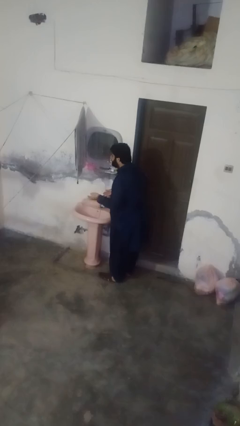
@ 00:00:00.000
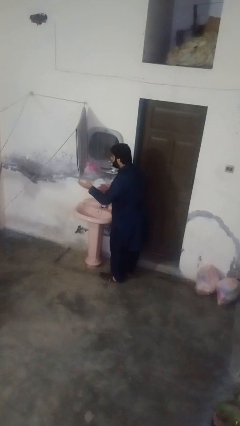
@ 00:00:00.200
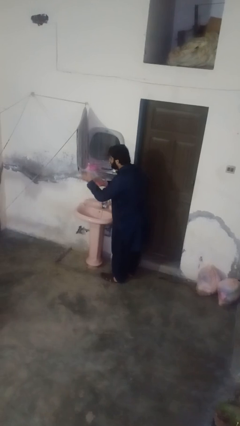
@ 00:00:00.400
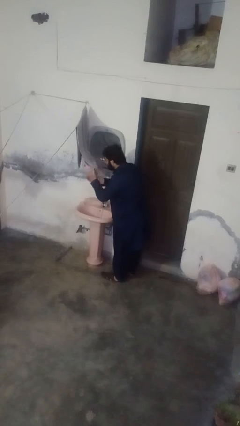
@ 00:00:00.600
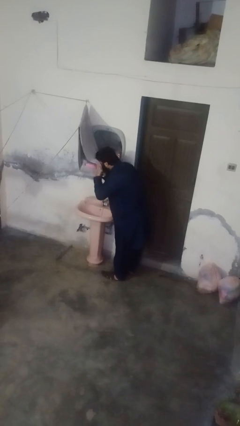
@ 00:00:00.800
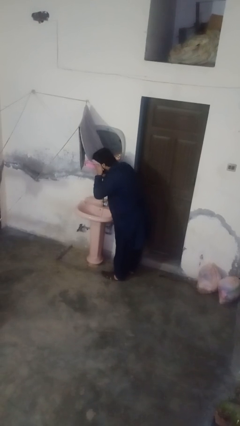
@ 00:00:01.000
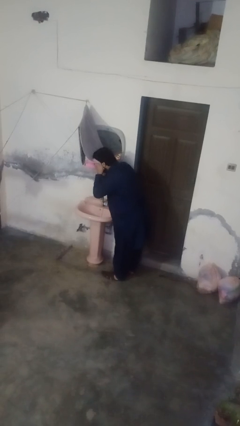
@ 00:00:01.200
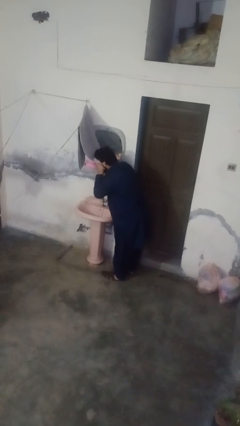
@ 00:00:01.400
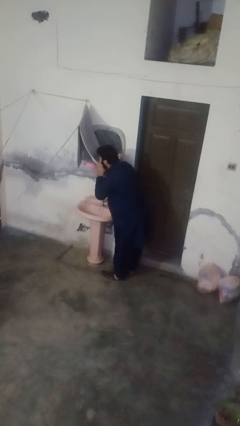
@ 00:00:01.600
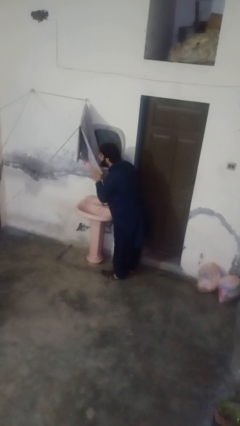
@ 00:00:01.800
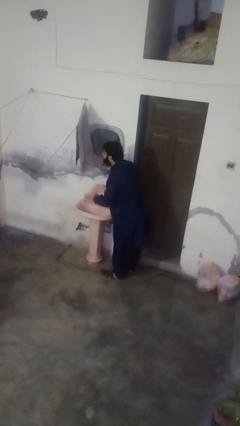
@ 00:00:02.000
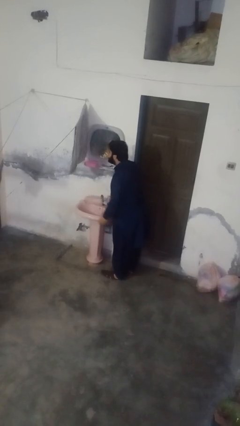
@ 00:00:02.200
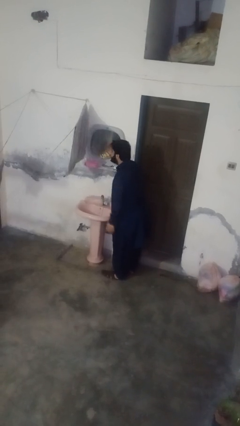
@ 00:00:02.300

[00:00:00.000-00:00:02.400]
person dries face with towel

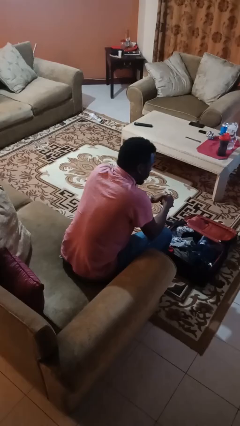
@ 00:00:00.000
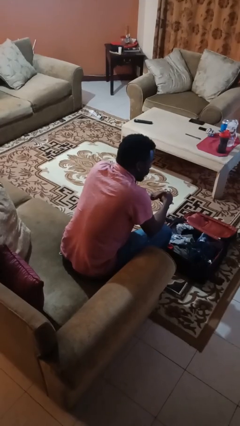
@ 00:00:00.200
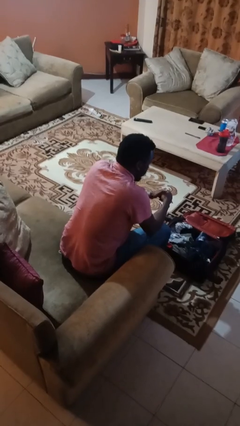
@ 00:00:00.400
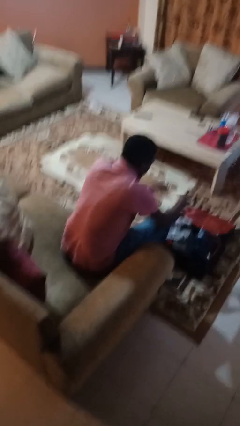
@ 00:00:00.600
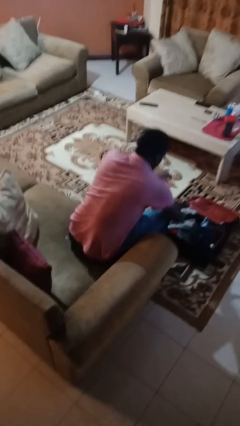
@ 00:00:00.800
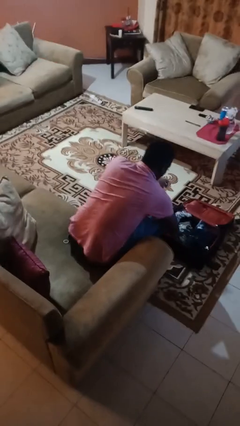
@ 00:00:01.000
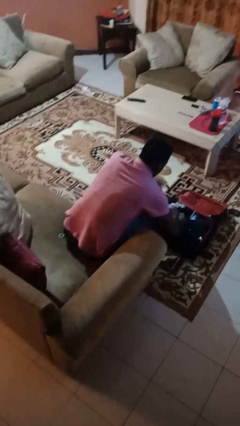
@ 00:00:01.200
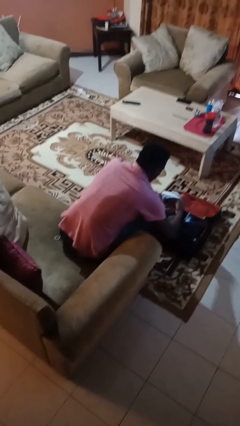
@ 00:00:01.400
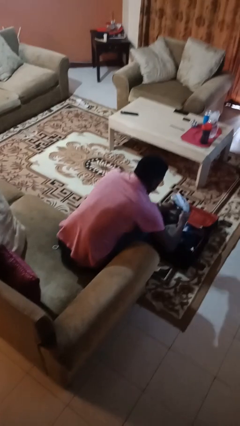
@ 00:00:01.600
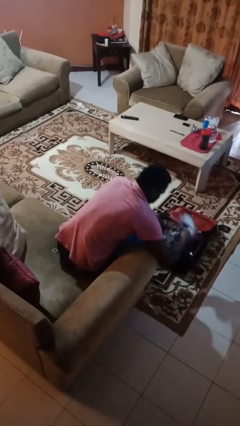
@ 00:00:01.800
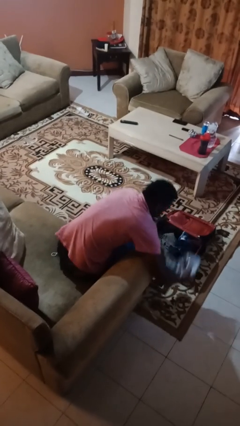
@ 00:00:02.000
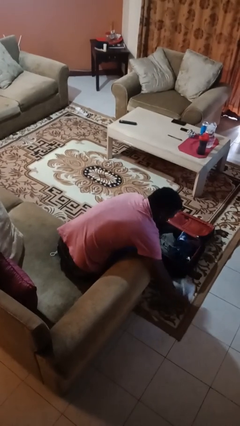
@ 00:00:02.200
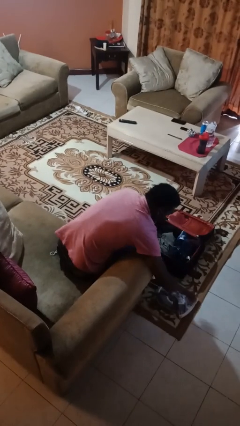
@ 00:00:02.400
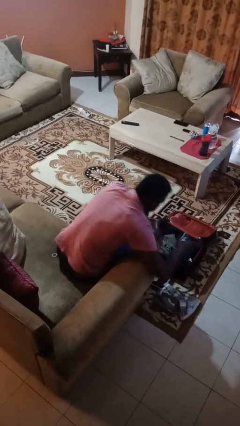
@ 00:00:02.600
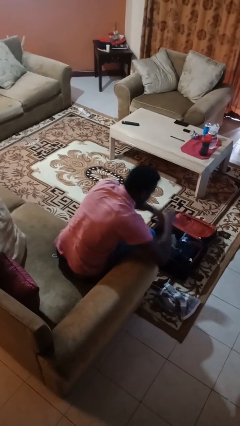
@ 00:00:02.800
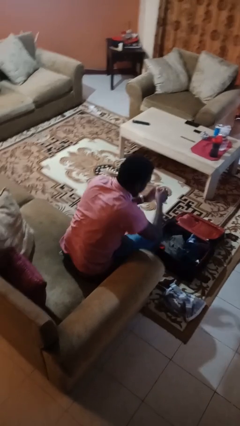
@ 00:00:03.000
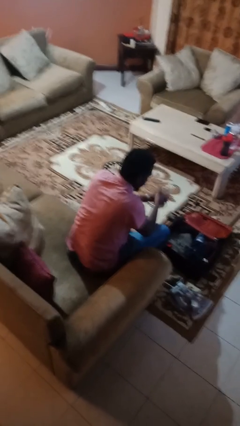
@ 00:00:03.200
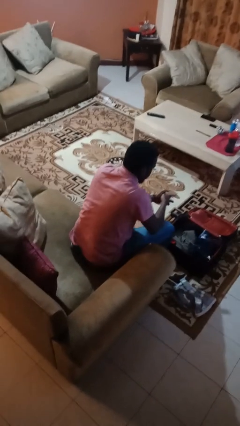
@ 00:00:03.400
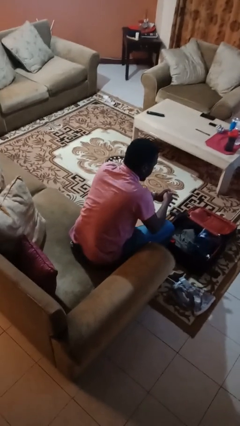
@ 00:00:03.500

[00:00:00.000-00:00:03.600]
person unloads clothes from suitcase

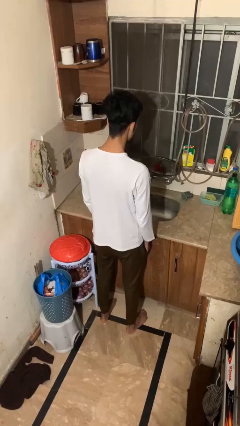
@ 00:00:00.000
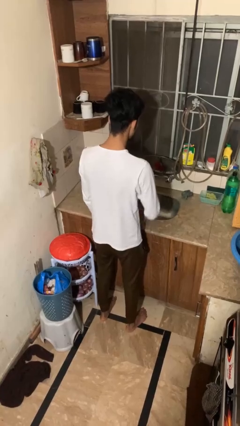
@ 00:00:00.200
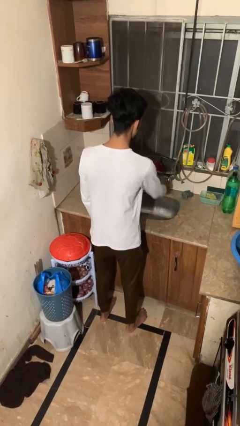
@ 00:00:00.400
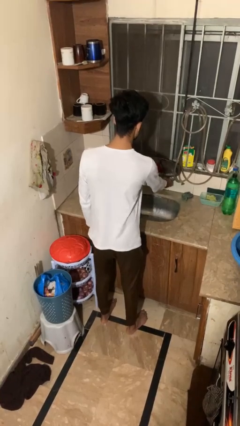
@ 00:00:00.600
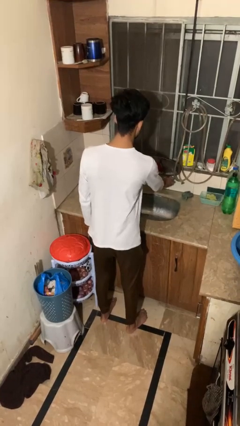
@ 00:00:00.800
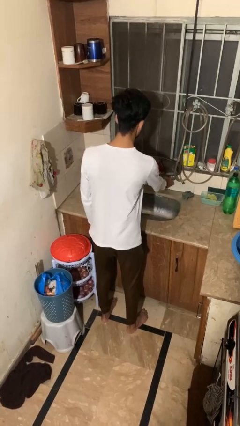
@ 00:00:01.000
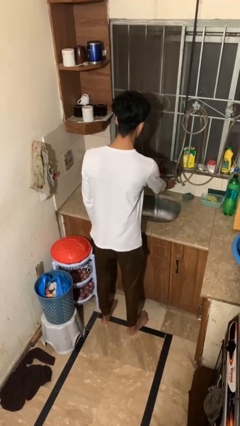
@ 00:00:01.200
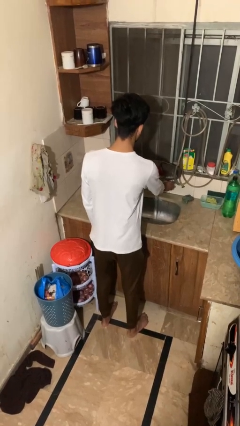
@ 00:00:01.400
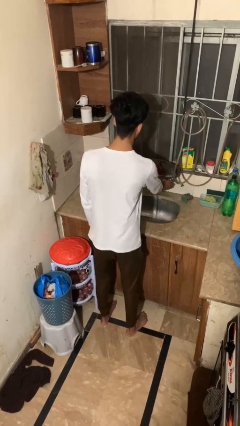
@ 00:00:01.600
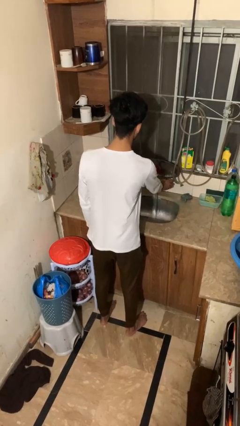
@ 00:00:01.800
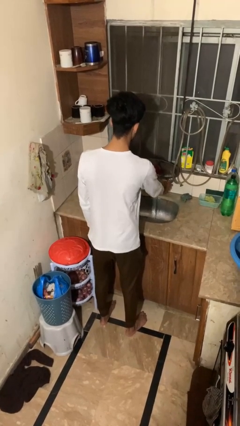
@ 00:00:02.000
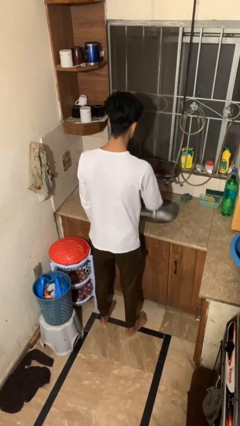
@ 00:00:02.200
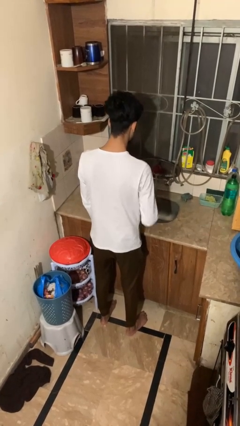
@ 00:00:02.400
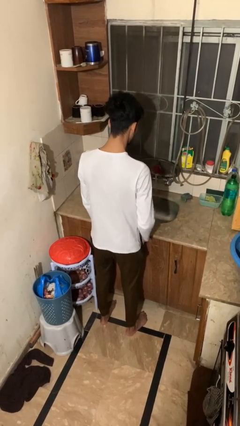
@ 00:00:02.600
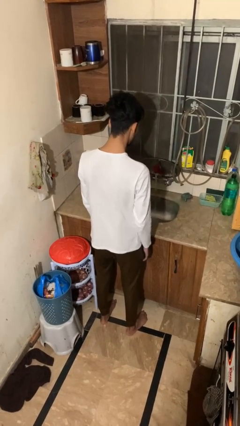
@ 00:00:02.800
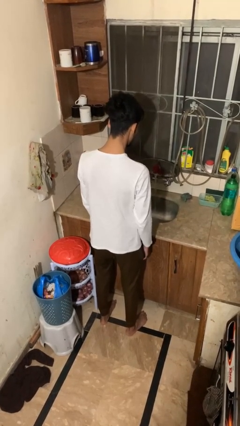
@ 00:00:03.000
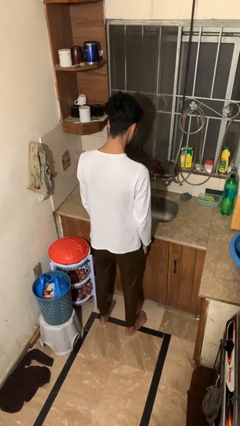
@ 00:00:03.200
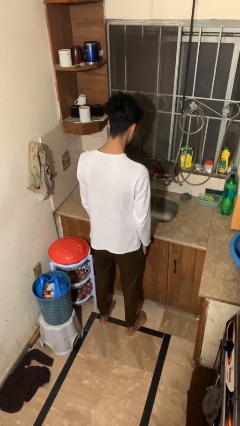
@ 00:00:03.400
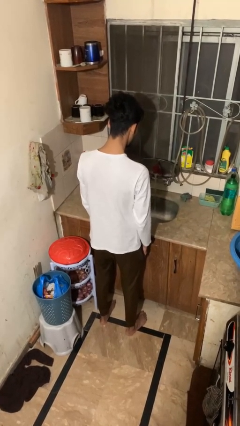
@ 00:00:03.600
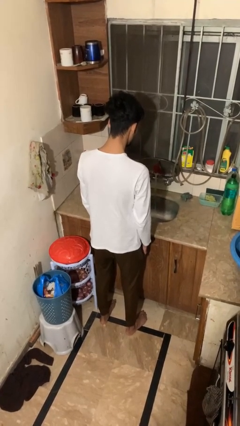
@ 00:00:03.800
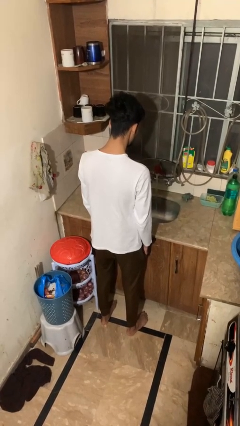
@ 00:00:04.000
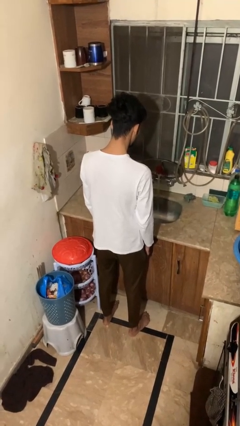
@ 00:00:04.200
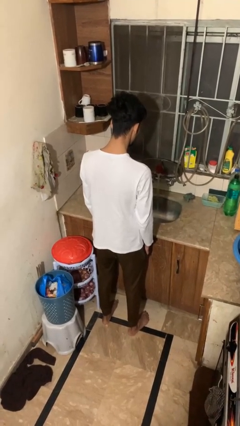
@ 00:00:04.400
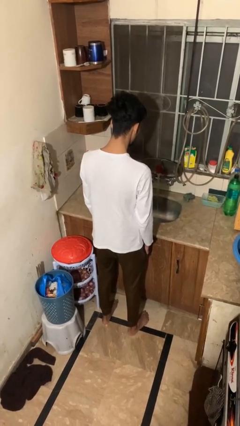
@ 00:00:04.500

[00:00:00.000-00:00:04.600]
person turns on faucet

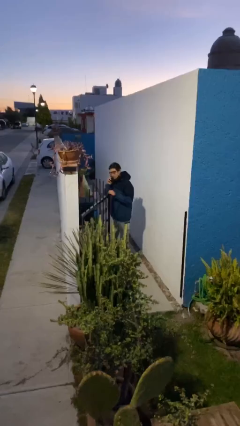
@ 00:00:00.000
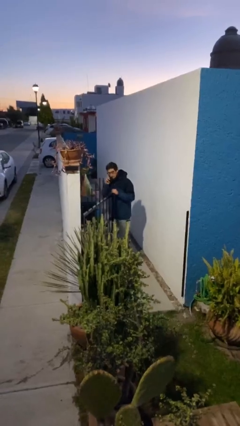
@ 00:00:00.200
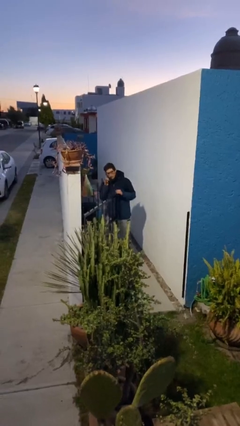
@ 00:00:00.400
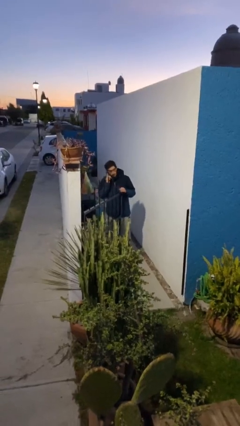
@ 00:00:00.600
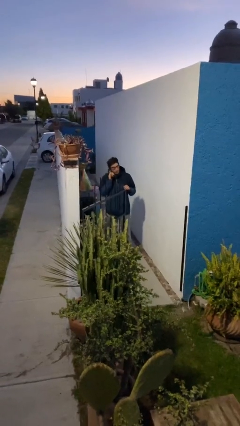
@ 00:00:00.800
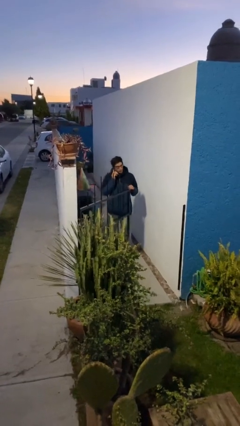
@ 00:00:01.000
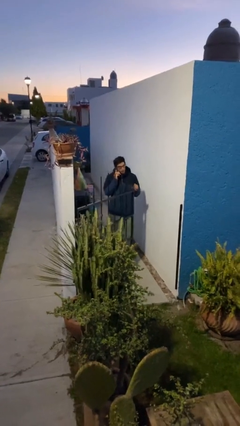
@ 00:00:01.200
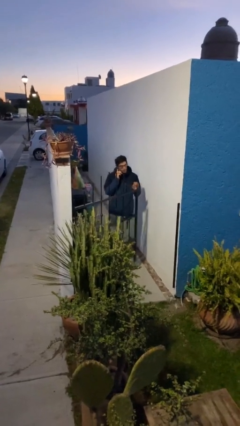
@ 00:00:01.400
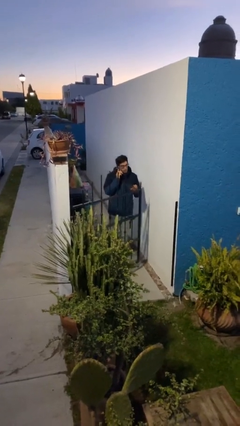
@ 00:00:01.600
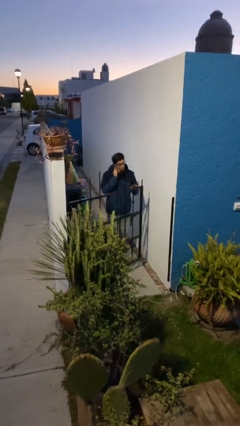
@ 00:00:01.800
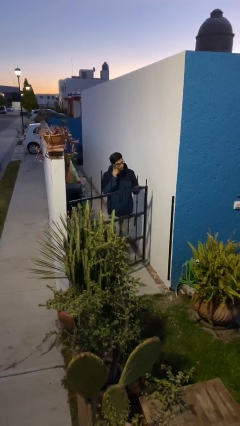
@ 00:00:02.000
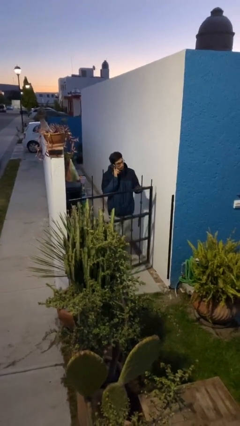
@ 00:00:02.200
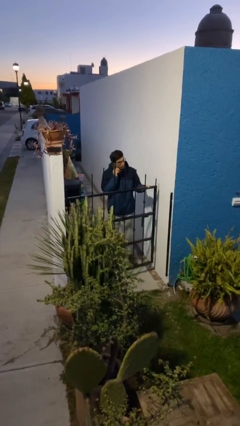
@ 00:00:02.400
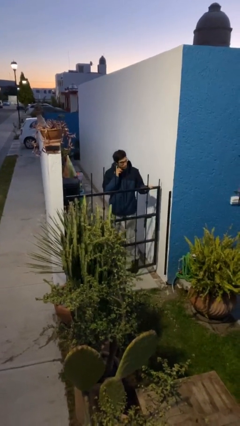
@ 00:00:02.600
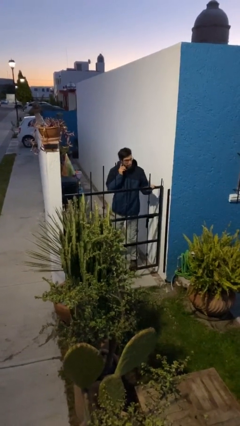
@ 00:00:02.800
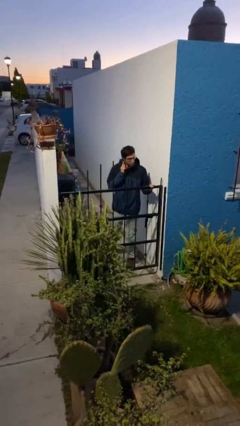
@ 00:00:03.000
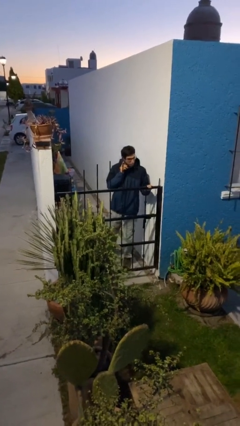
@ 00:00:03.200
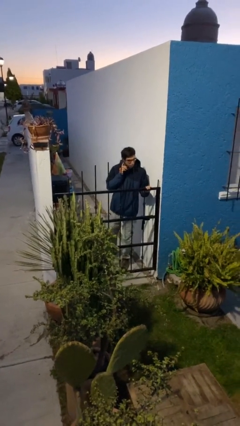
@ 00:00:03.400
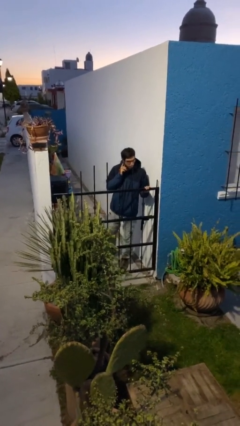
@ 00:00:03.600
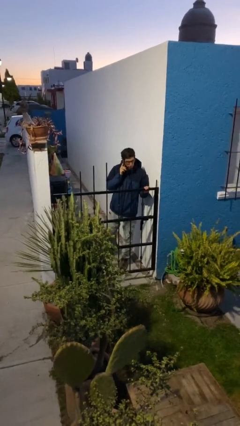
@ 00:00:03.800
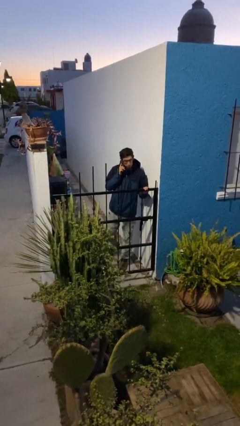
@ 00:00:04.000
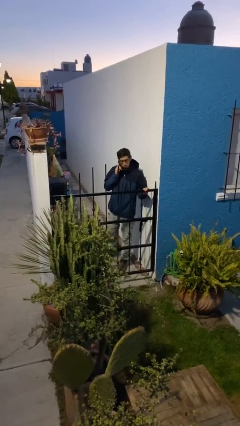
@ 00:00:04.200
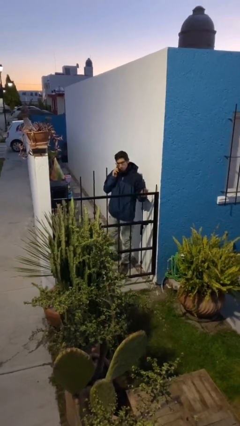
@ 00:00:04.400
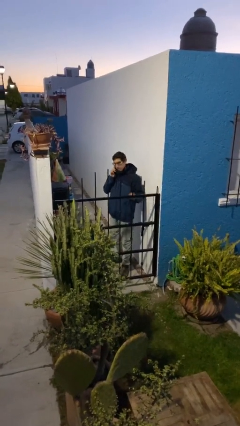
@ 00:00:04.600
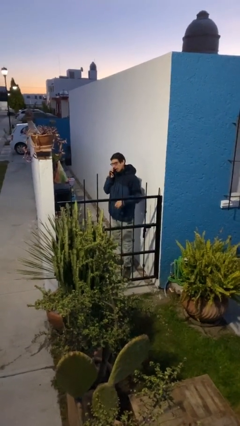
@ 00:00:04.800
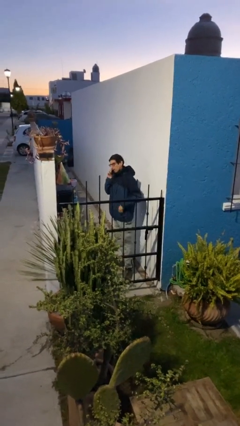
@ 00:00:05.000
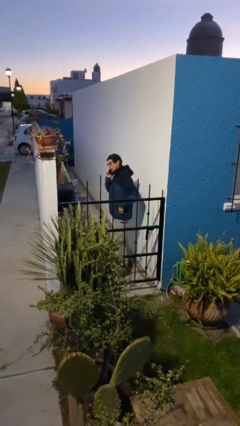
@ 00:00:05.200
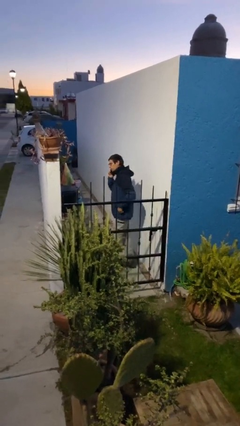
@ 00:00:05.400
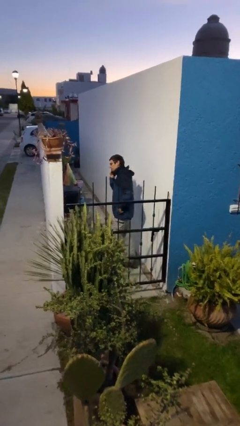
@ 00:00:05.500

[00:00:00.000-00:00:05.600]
person closes facility door

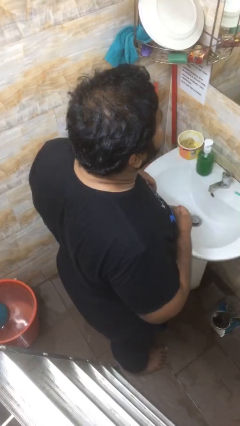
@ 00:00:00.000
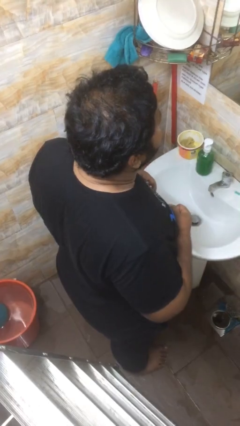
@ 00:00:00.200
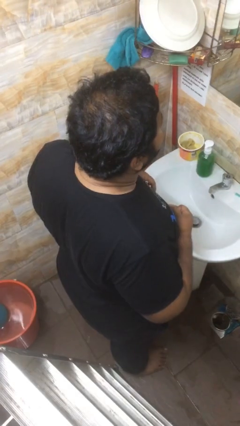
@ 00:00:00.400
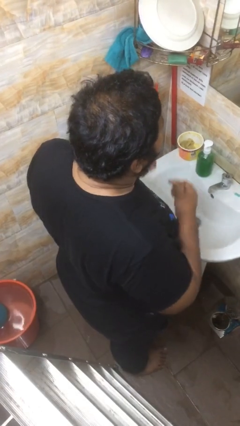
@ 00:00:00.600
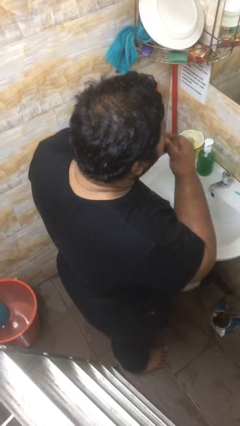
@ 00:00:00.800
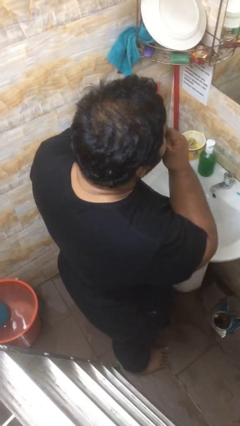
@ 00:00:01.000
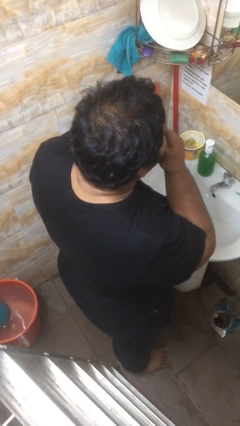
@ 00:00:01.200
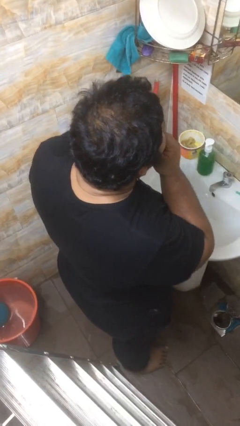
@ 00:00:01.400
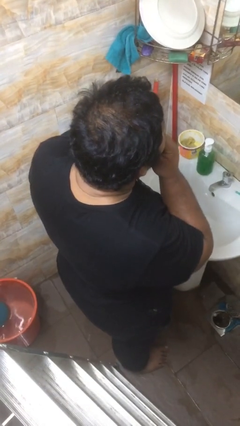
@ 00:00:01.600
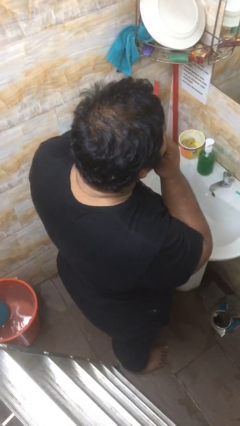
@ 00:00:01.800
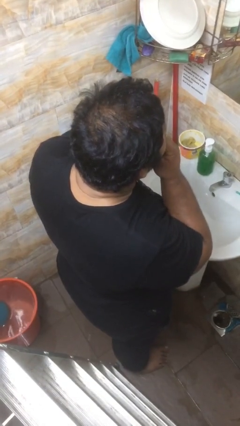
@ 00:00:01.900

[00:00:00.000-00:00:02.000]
person flosses
